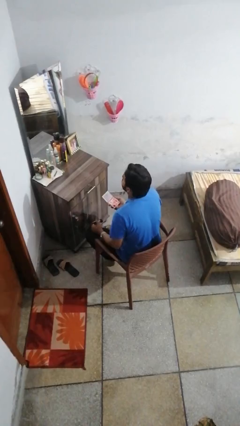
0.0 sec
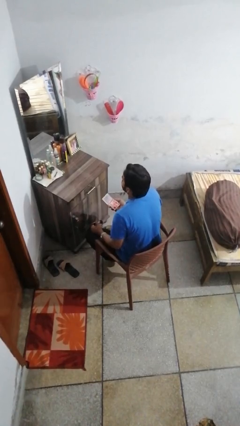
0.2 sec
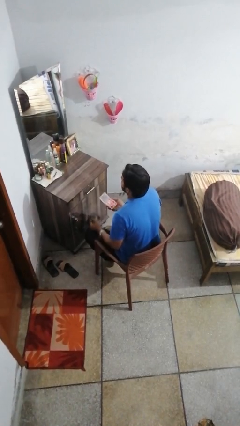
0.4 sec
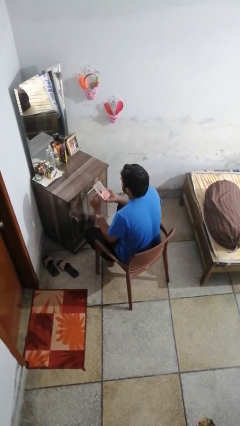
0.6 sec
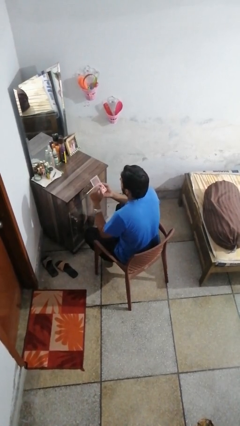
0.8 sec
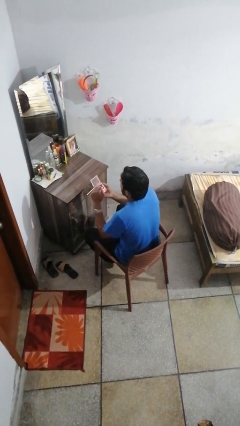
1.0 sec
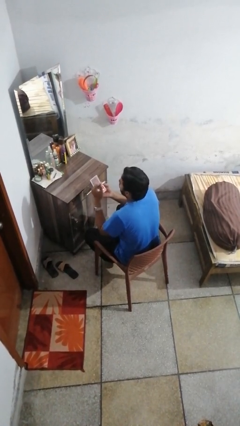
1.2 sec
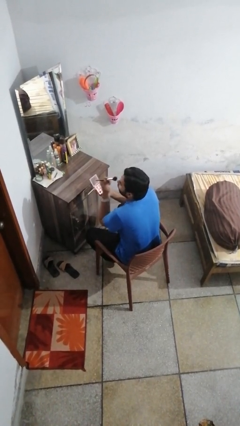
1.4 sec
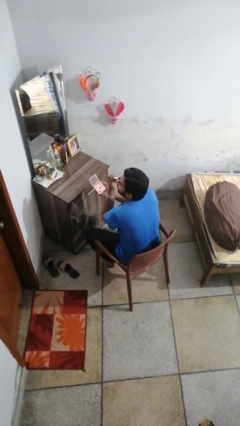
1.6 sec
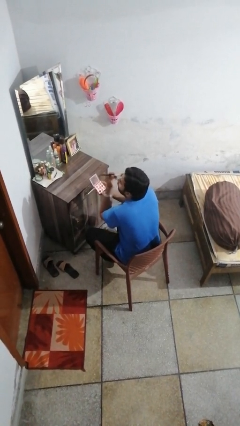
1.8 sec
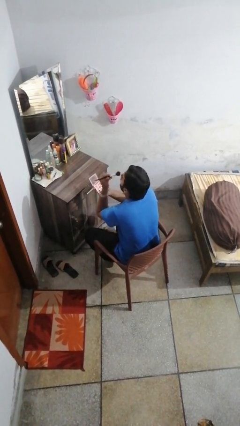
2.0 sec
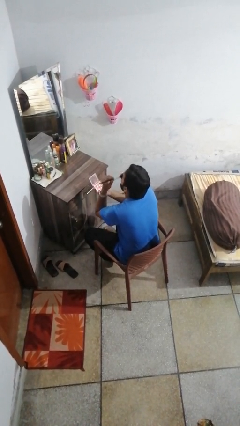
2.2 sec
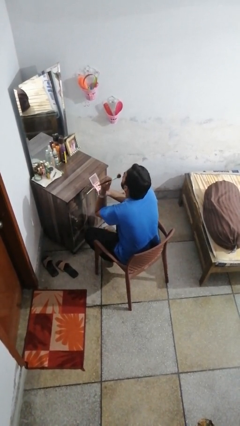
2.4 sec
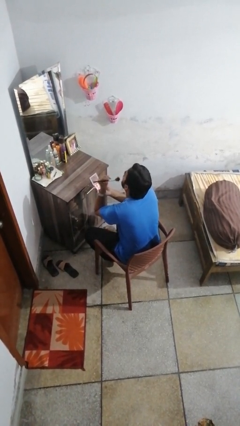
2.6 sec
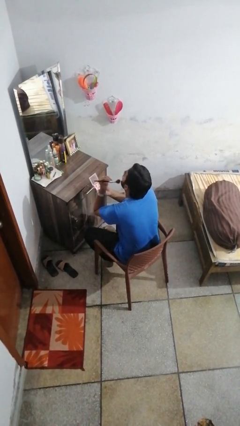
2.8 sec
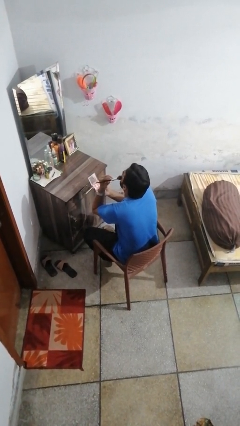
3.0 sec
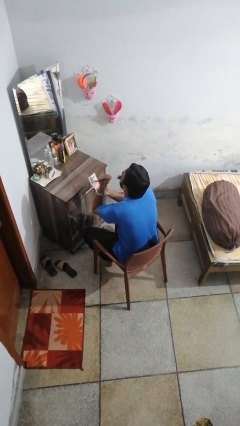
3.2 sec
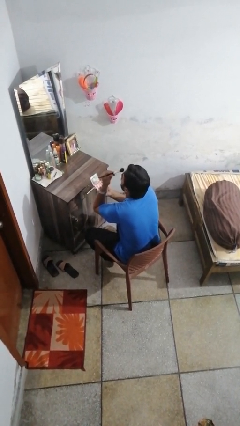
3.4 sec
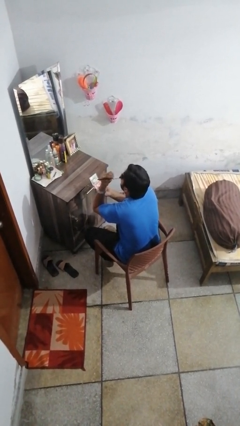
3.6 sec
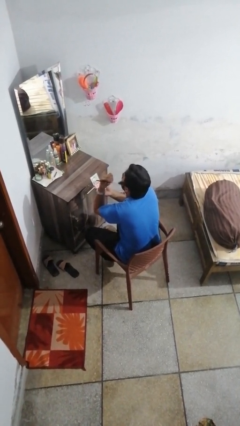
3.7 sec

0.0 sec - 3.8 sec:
person applies foundation makeup

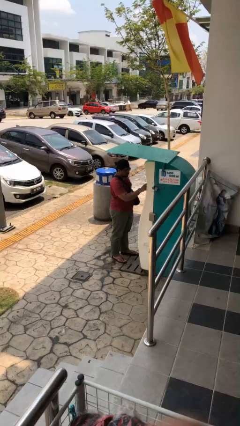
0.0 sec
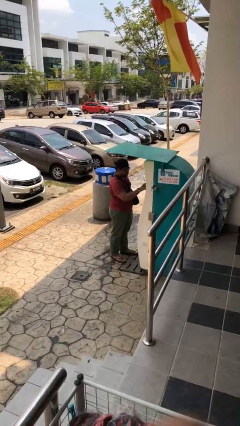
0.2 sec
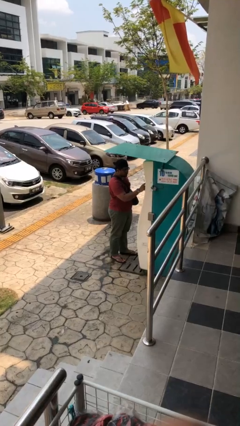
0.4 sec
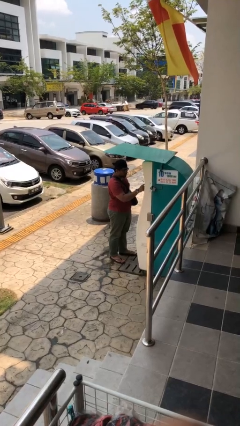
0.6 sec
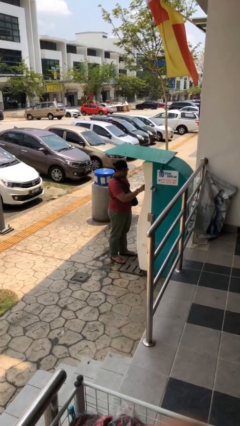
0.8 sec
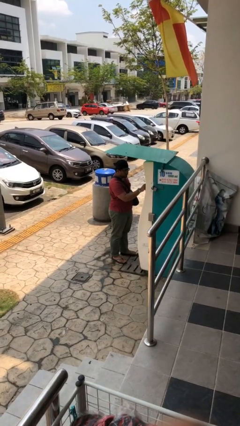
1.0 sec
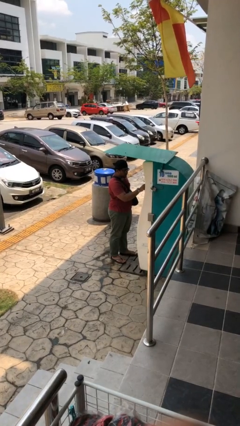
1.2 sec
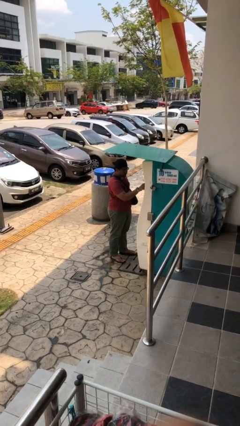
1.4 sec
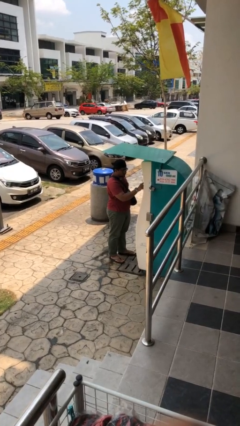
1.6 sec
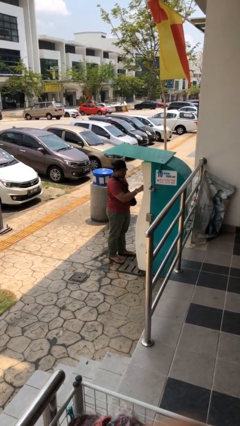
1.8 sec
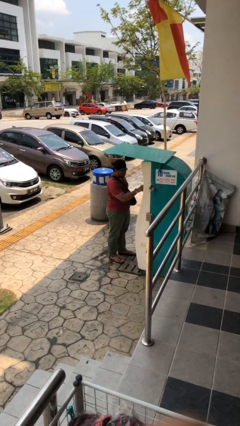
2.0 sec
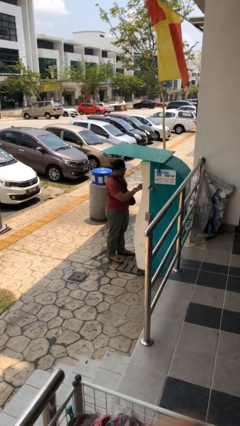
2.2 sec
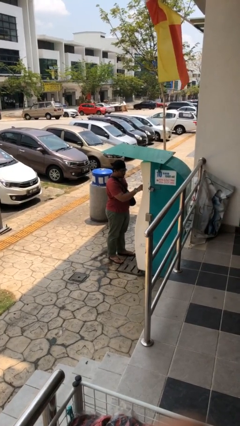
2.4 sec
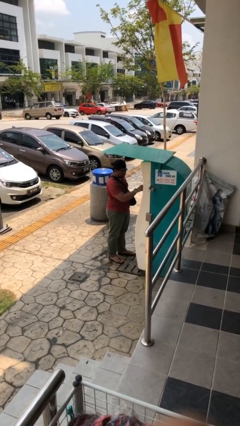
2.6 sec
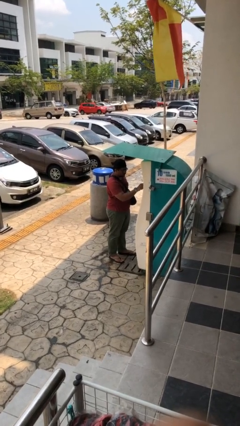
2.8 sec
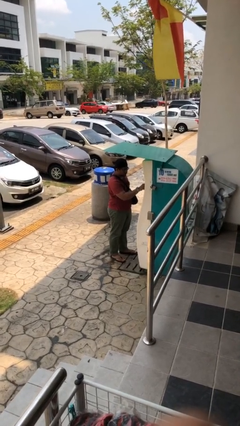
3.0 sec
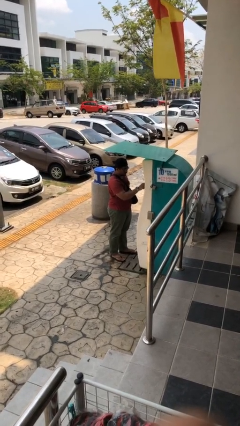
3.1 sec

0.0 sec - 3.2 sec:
person purchases from machine

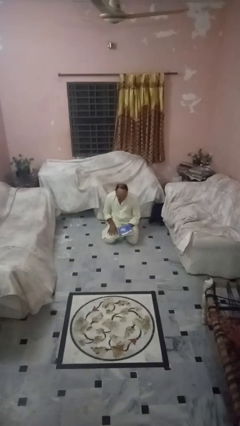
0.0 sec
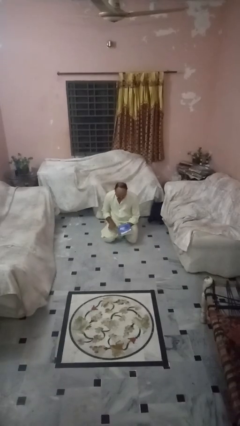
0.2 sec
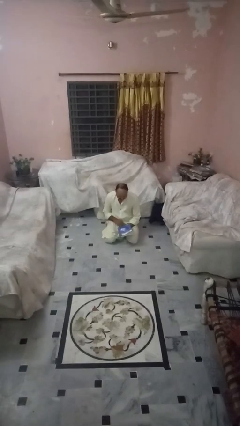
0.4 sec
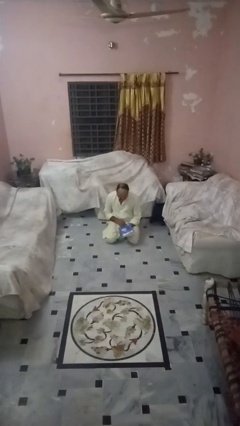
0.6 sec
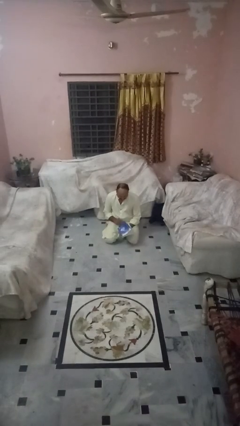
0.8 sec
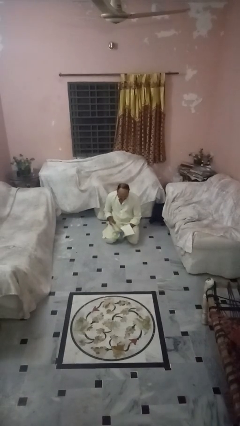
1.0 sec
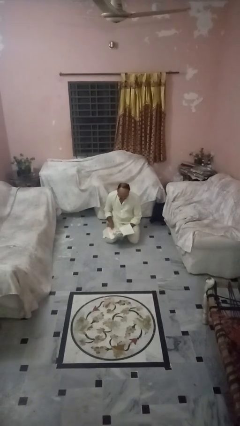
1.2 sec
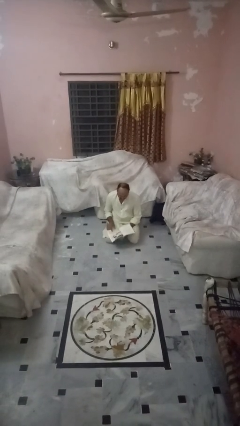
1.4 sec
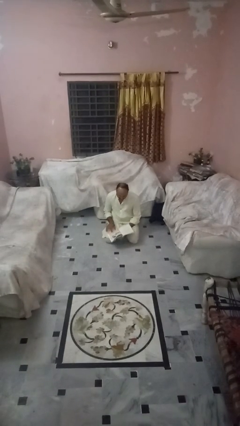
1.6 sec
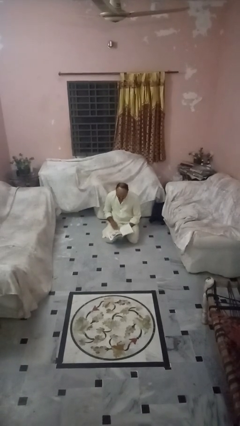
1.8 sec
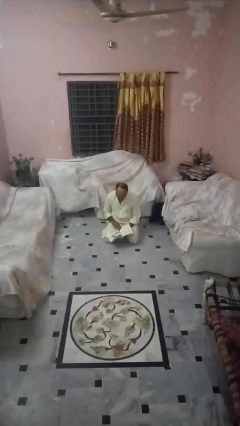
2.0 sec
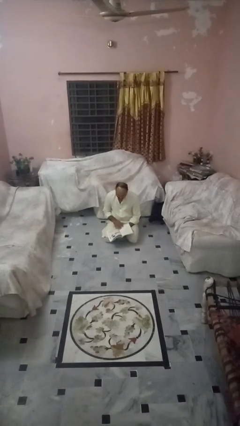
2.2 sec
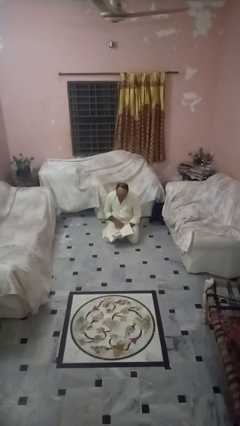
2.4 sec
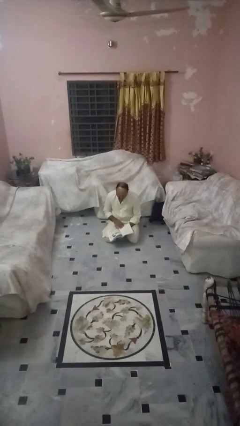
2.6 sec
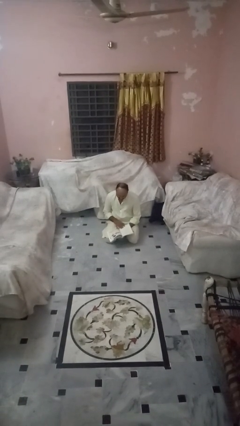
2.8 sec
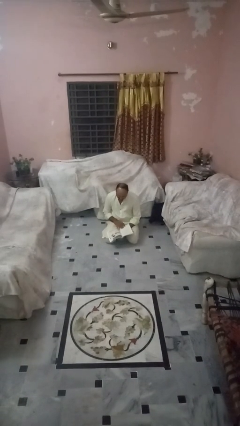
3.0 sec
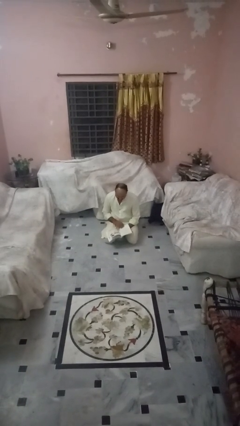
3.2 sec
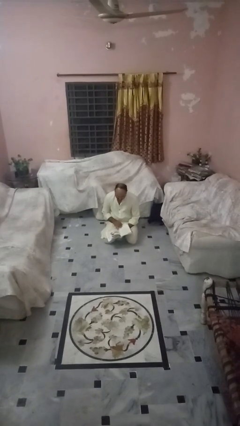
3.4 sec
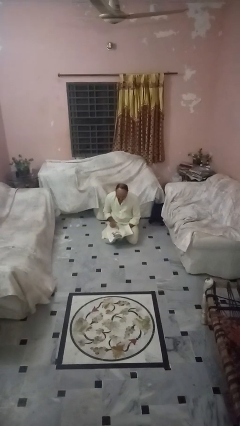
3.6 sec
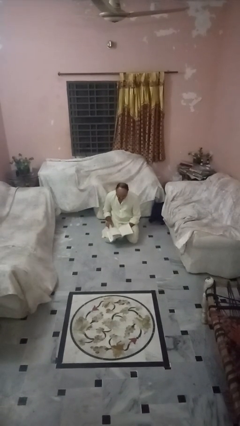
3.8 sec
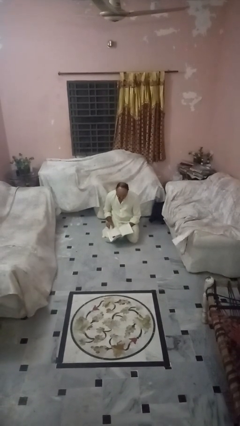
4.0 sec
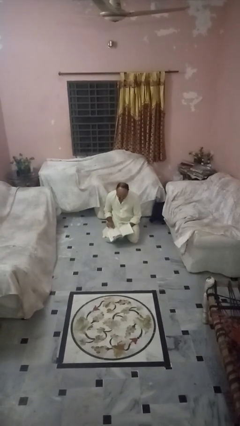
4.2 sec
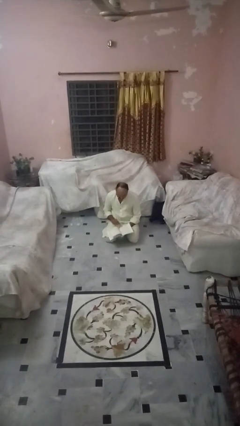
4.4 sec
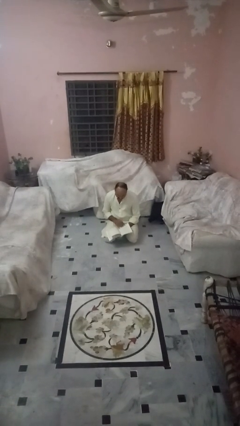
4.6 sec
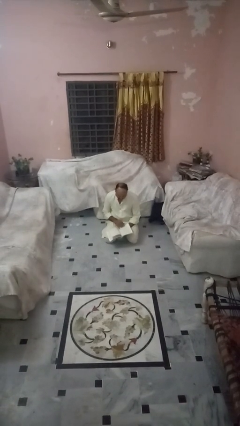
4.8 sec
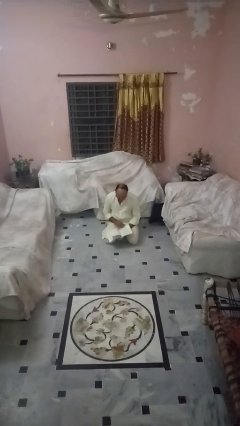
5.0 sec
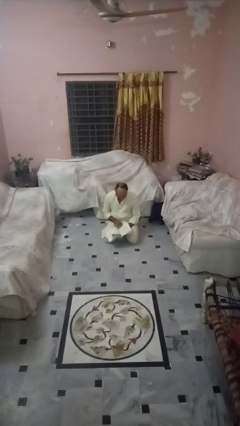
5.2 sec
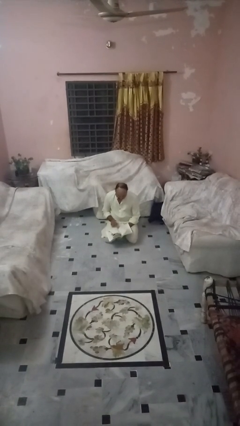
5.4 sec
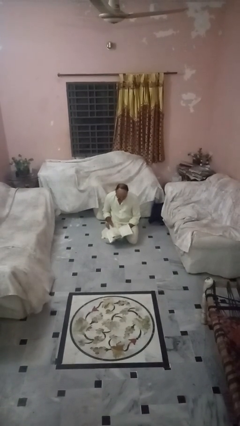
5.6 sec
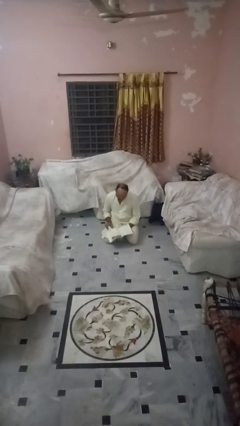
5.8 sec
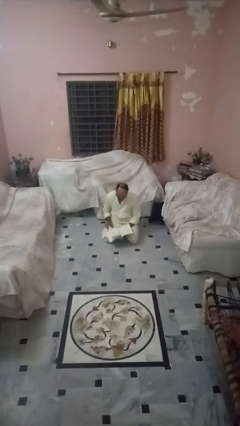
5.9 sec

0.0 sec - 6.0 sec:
person reads book

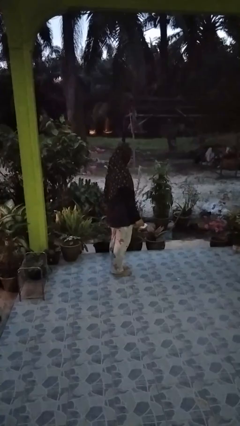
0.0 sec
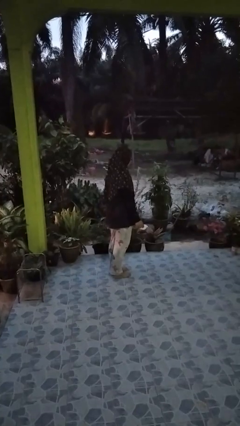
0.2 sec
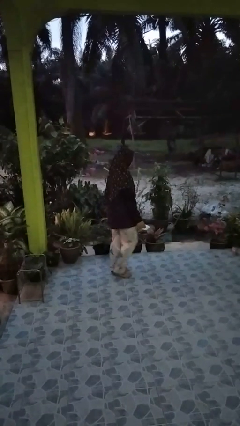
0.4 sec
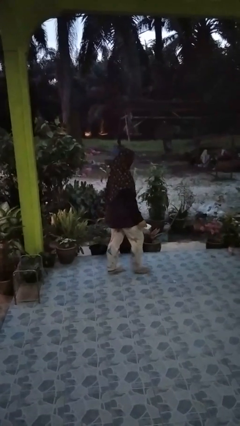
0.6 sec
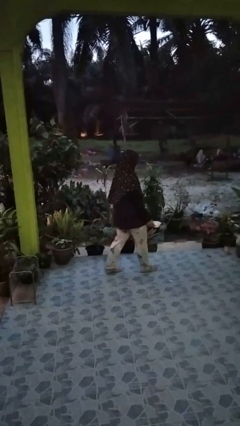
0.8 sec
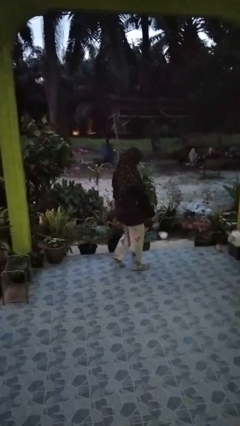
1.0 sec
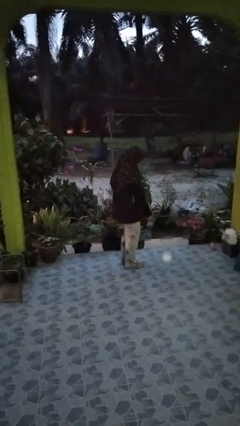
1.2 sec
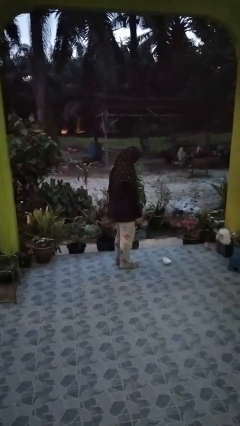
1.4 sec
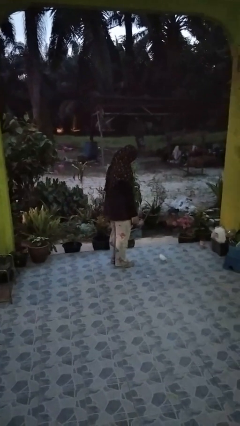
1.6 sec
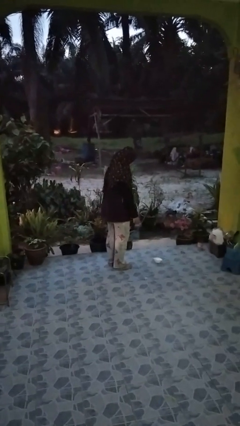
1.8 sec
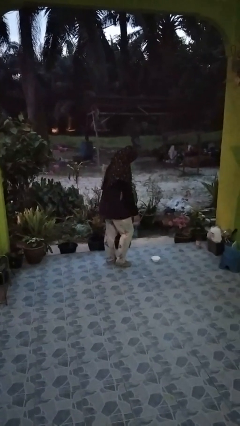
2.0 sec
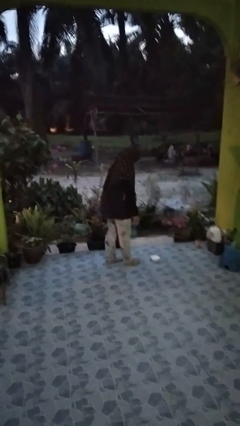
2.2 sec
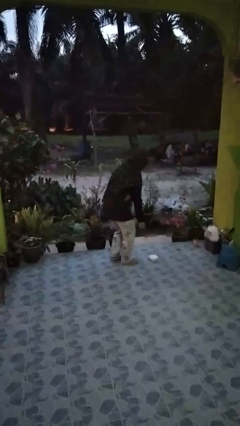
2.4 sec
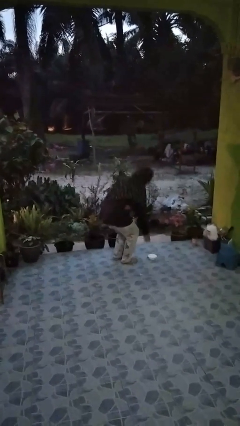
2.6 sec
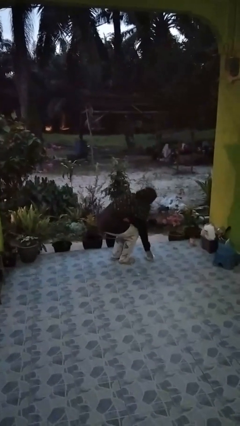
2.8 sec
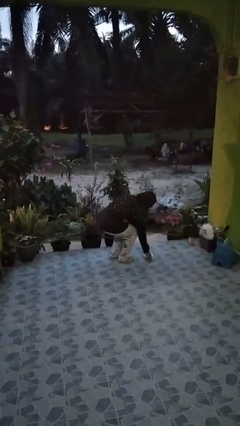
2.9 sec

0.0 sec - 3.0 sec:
person drops object

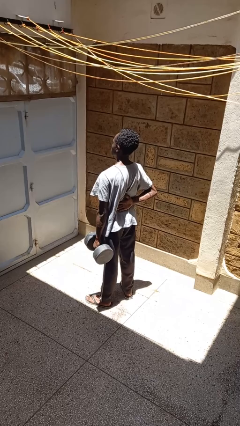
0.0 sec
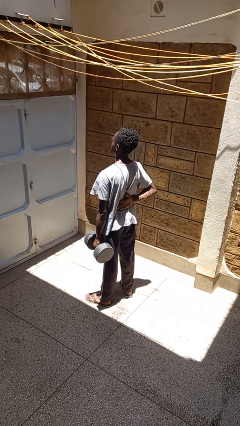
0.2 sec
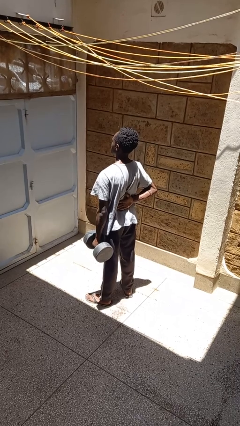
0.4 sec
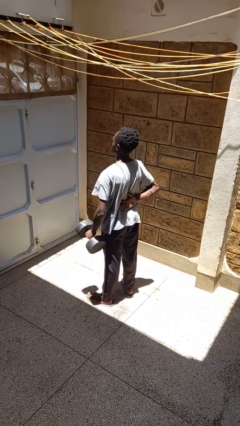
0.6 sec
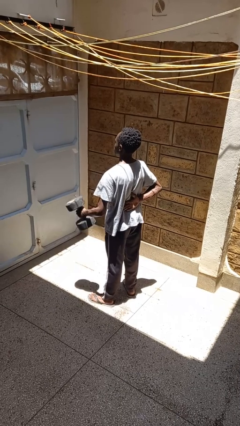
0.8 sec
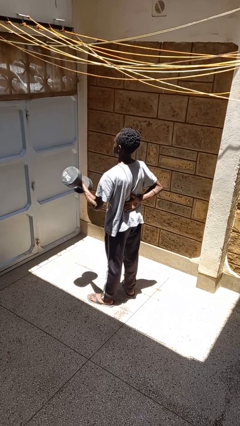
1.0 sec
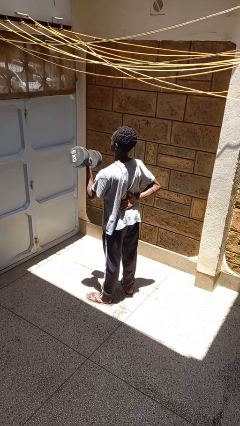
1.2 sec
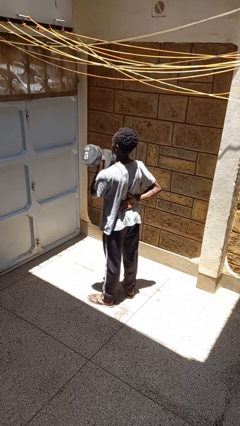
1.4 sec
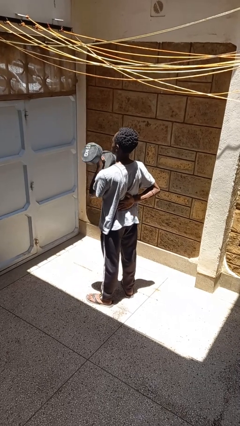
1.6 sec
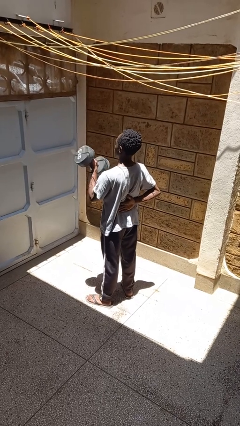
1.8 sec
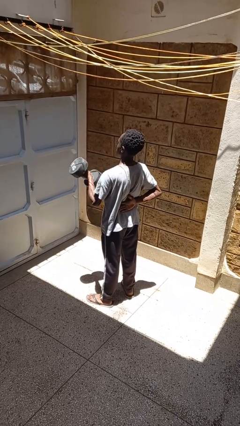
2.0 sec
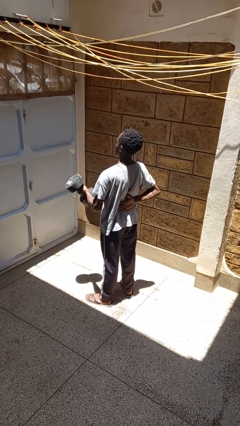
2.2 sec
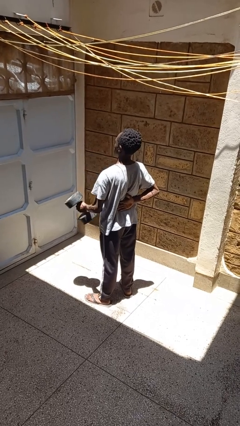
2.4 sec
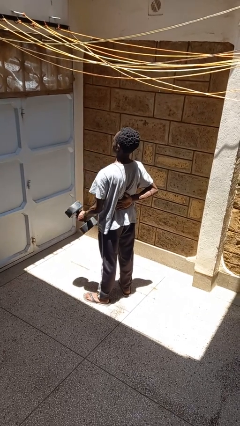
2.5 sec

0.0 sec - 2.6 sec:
person lifts dumbbells
